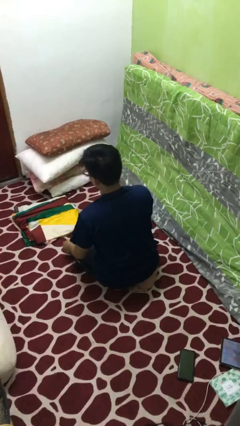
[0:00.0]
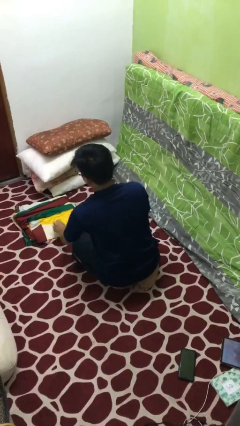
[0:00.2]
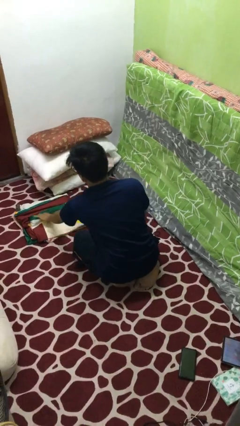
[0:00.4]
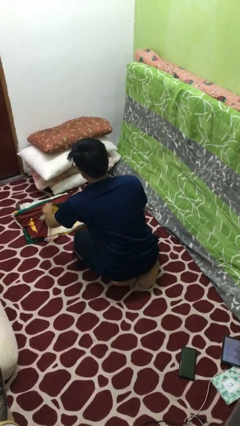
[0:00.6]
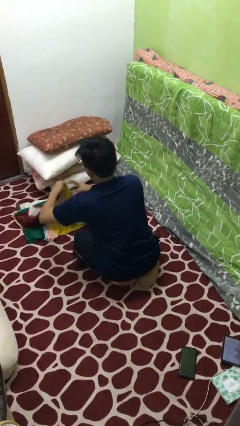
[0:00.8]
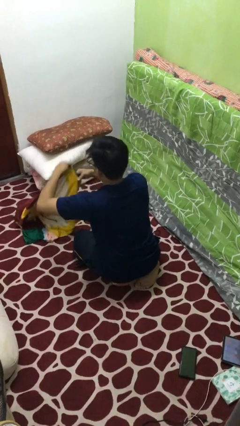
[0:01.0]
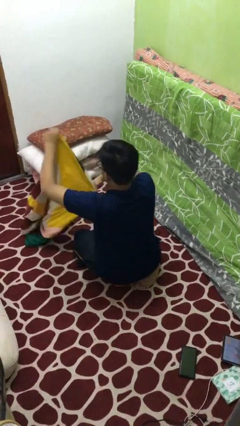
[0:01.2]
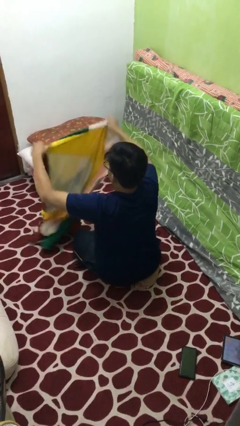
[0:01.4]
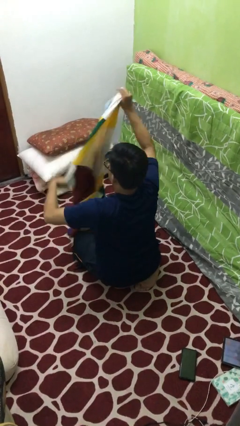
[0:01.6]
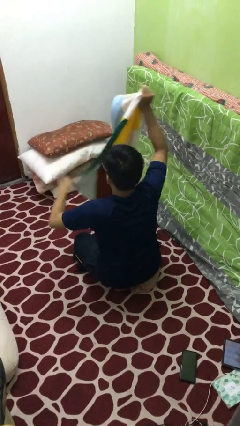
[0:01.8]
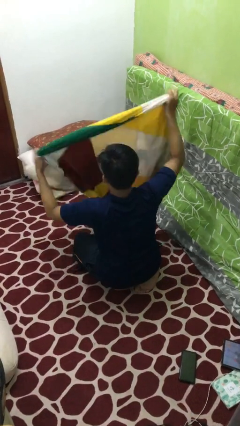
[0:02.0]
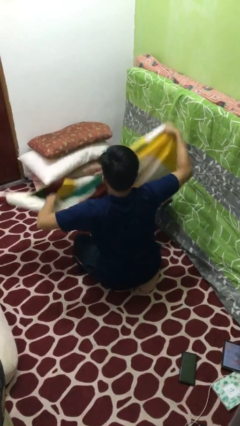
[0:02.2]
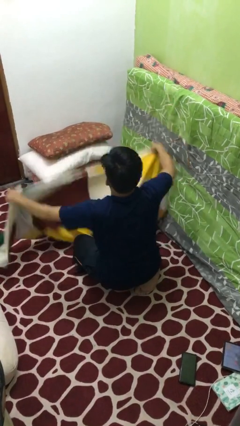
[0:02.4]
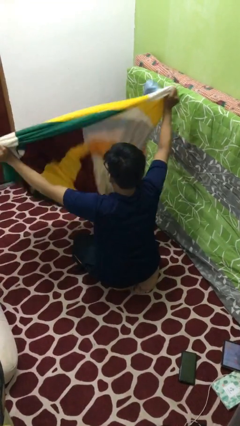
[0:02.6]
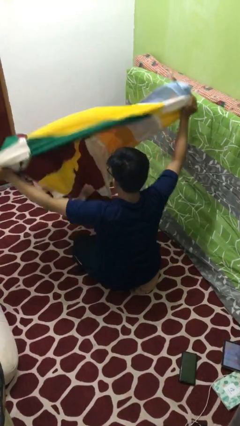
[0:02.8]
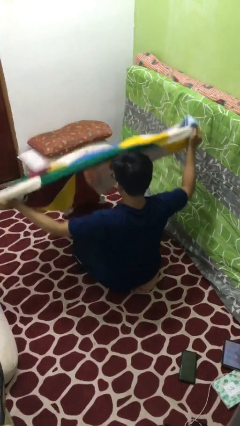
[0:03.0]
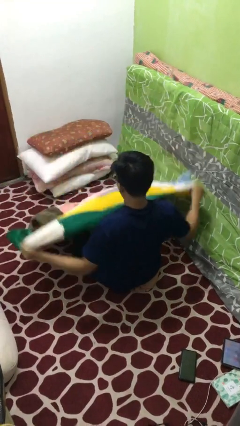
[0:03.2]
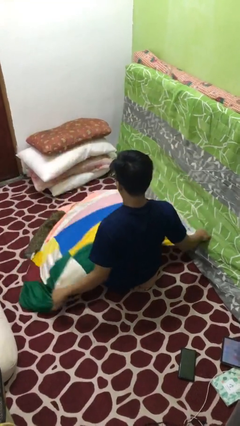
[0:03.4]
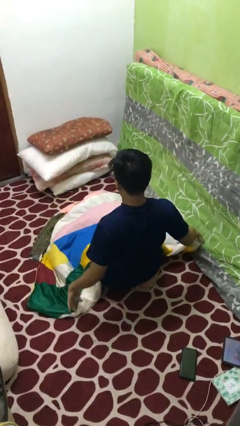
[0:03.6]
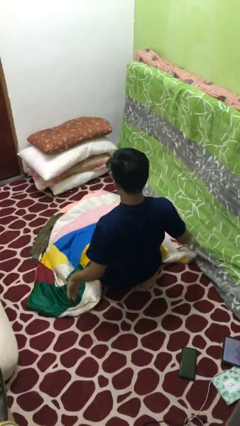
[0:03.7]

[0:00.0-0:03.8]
person unfolds blanket

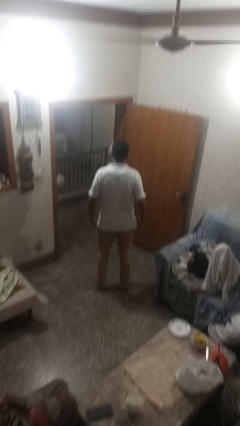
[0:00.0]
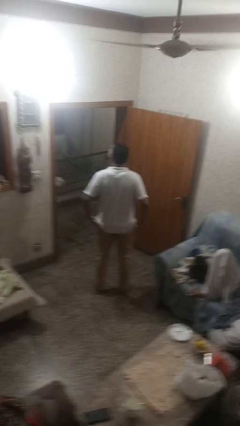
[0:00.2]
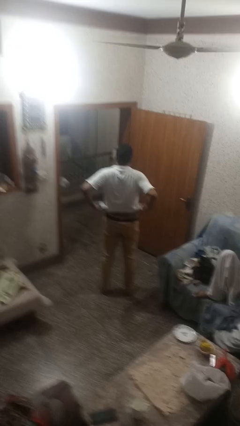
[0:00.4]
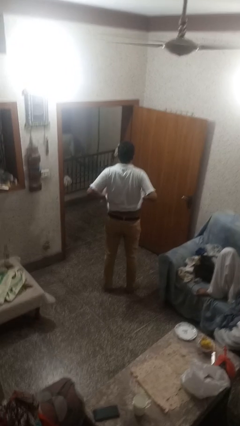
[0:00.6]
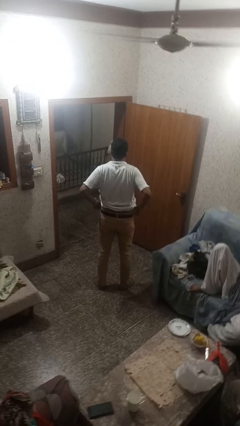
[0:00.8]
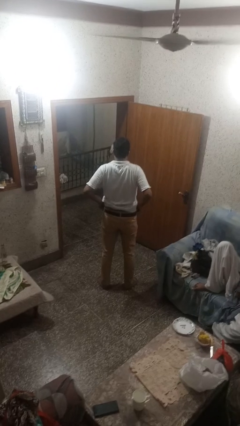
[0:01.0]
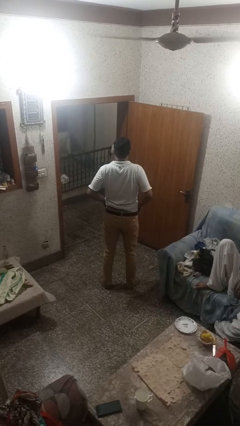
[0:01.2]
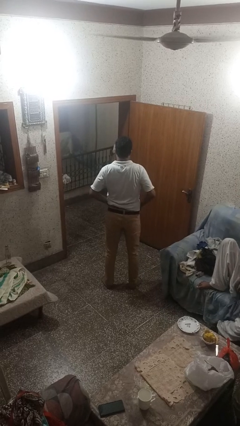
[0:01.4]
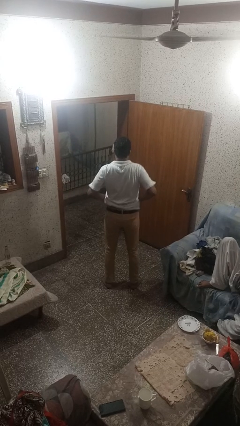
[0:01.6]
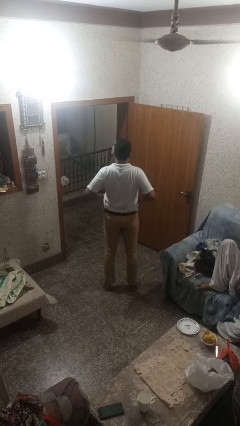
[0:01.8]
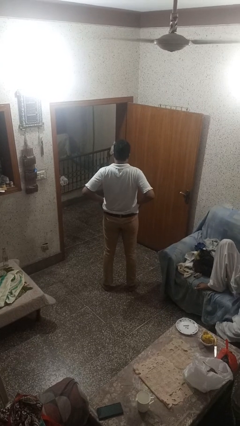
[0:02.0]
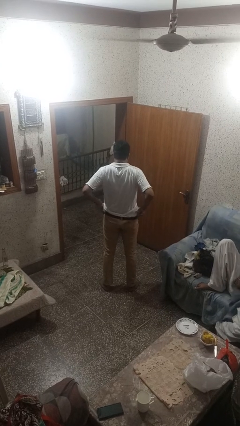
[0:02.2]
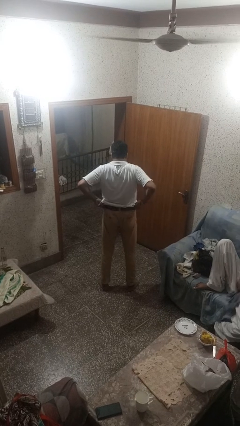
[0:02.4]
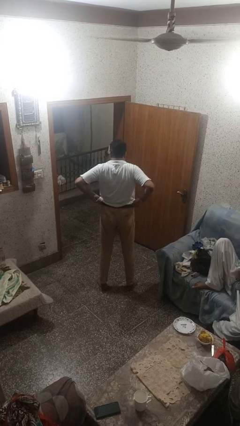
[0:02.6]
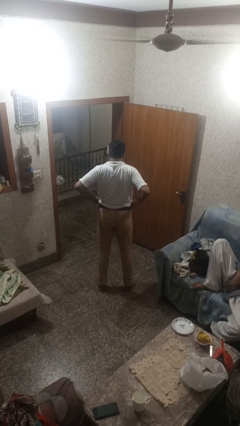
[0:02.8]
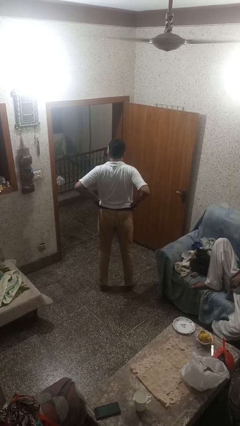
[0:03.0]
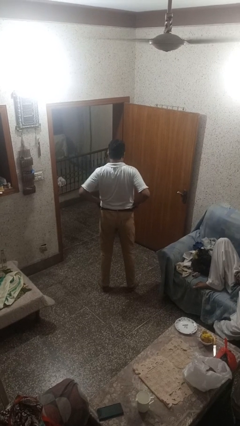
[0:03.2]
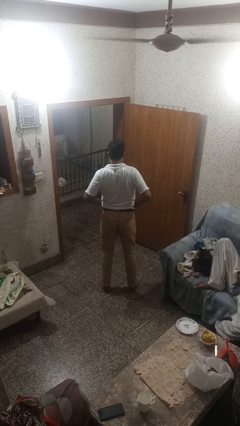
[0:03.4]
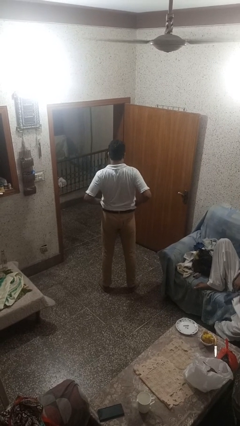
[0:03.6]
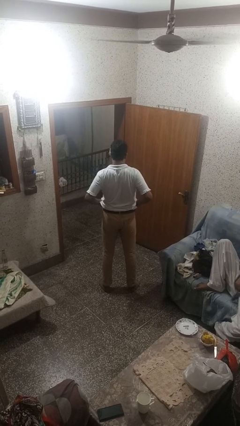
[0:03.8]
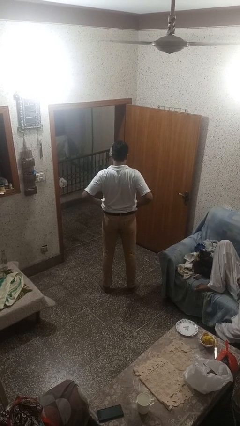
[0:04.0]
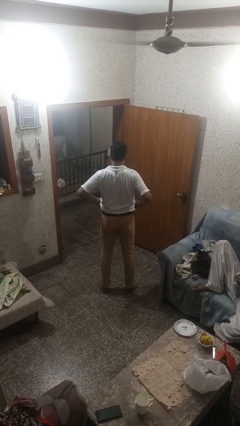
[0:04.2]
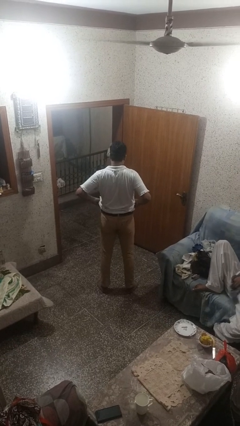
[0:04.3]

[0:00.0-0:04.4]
person hikes up pants

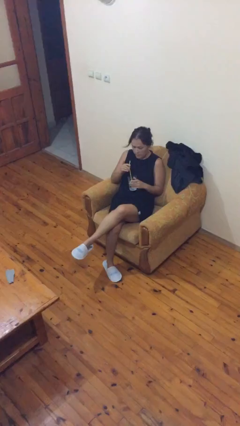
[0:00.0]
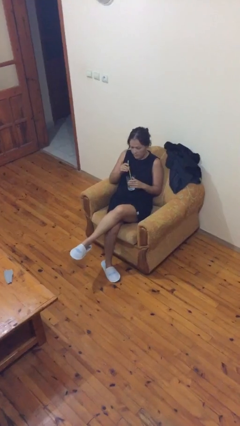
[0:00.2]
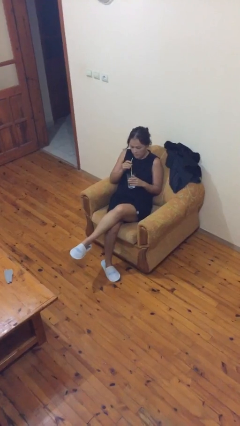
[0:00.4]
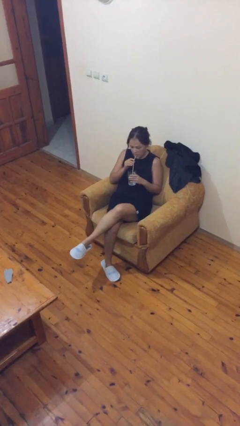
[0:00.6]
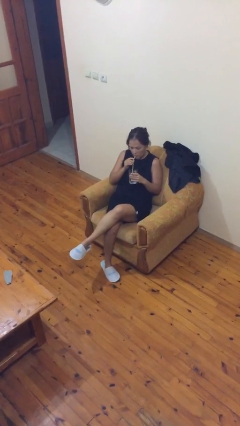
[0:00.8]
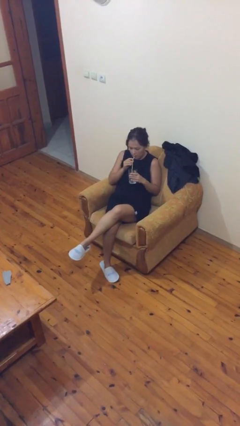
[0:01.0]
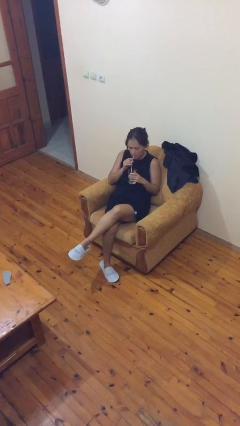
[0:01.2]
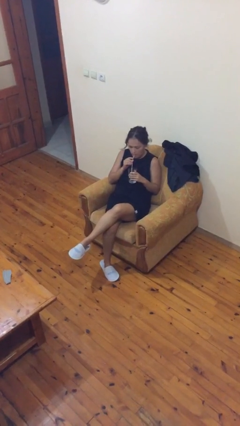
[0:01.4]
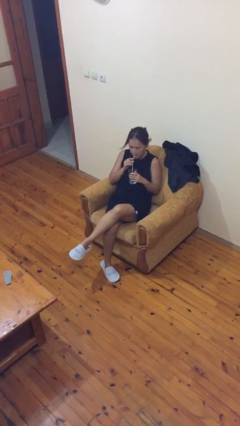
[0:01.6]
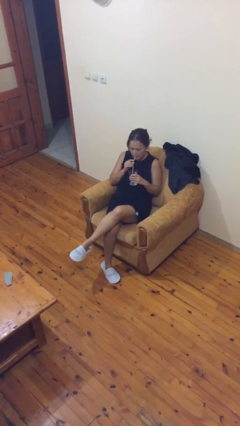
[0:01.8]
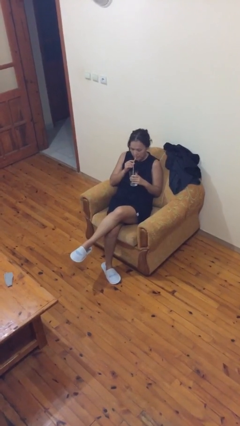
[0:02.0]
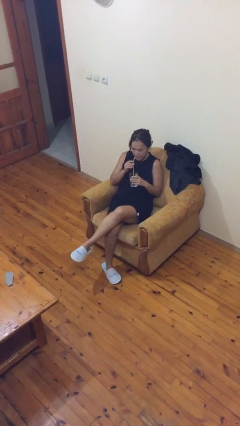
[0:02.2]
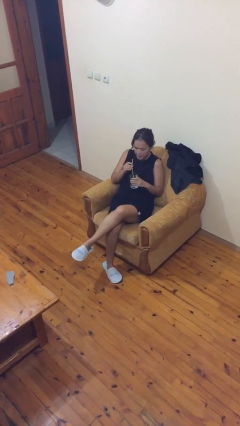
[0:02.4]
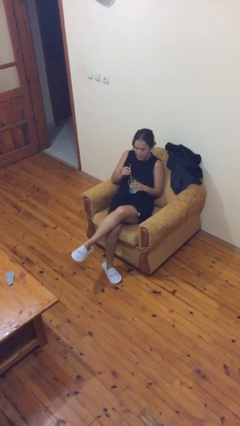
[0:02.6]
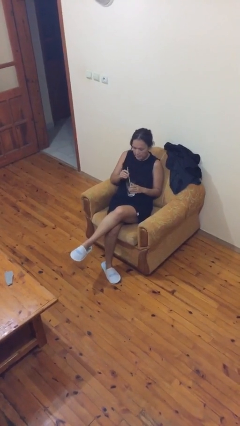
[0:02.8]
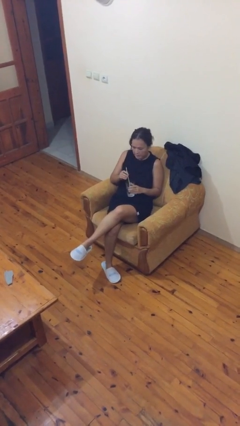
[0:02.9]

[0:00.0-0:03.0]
person drinks from straw

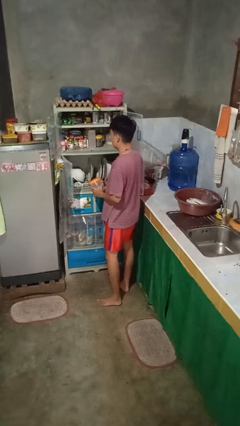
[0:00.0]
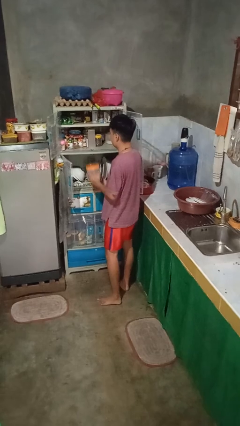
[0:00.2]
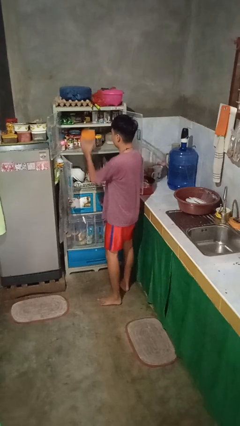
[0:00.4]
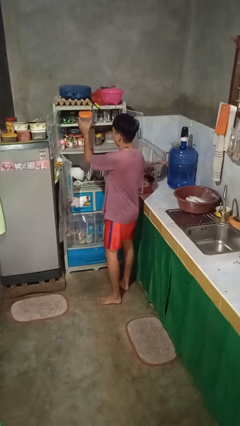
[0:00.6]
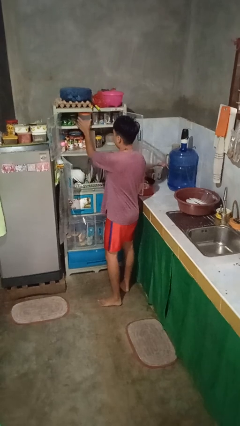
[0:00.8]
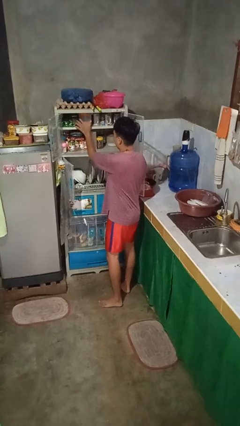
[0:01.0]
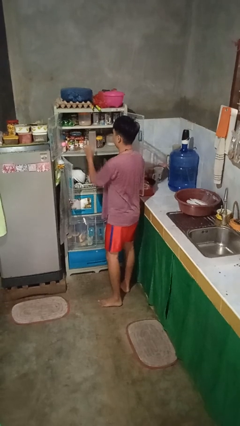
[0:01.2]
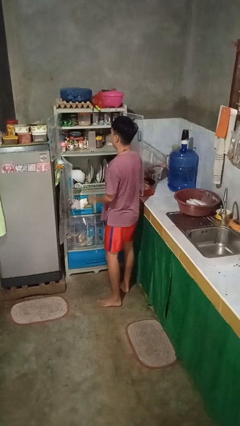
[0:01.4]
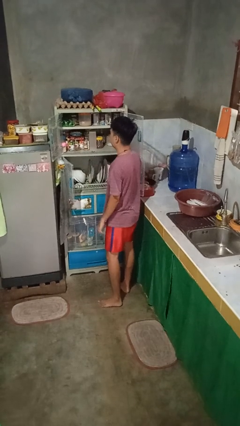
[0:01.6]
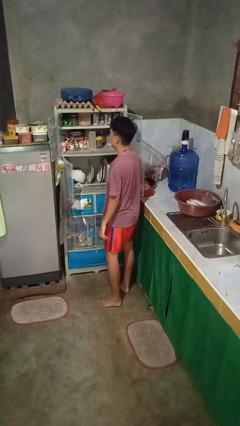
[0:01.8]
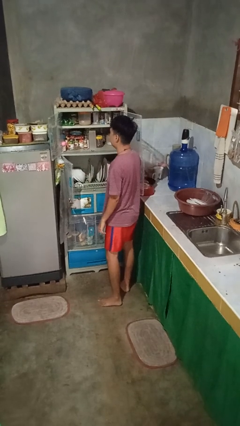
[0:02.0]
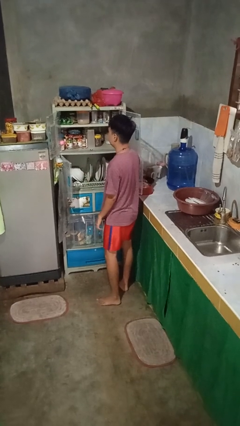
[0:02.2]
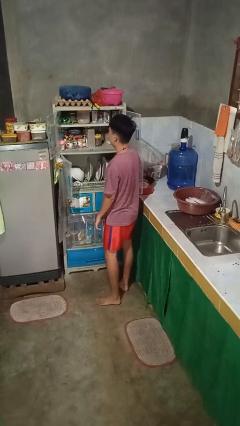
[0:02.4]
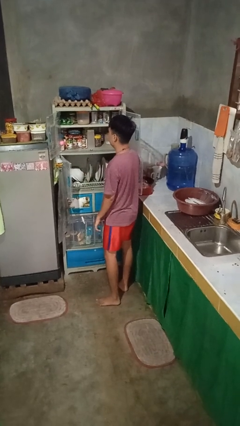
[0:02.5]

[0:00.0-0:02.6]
person puts object in cabinet

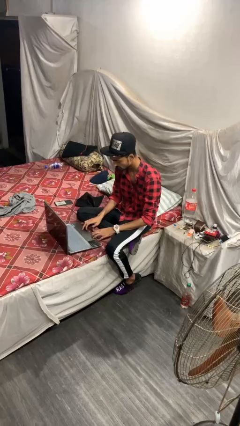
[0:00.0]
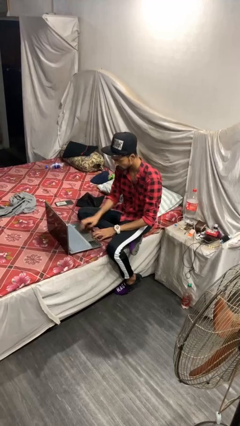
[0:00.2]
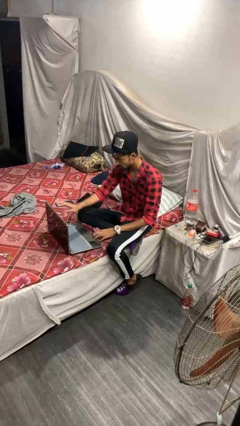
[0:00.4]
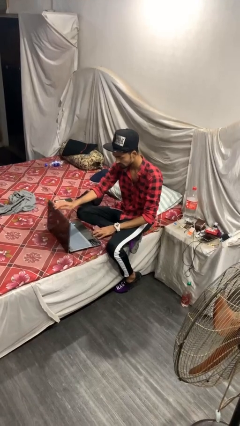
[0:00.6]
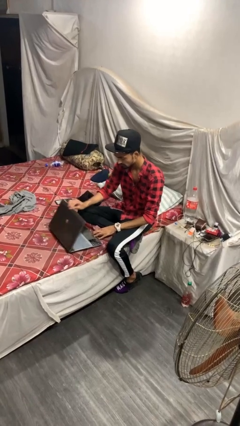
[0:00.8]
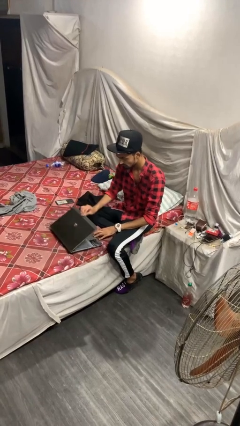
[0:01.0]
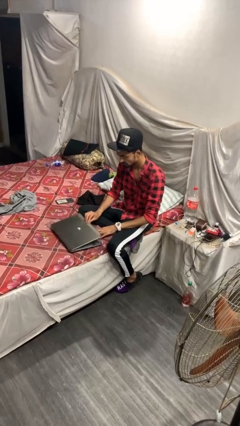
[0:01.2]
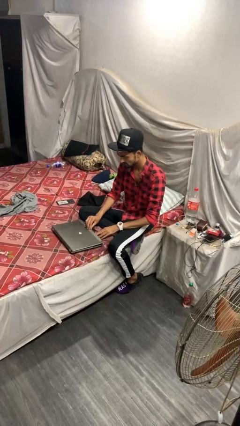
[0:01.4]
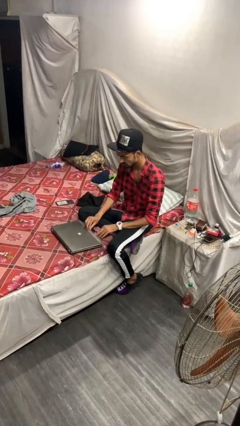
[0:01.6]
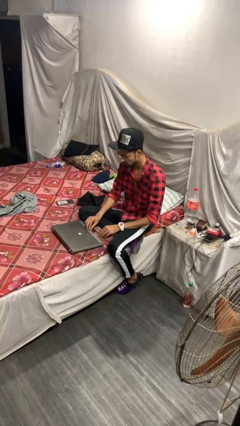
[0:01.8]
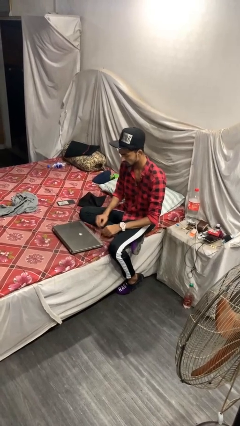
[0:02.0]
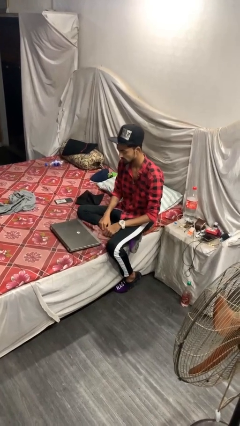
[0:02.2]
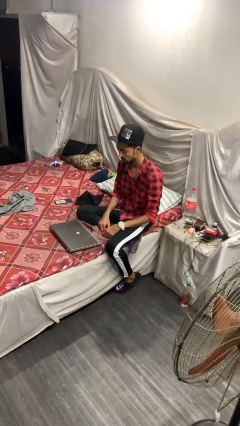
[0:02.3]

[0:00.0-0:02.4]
person closes laptop

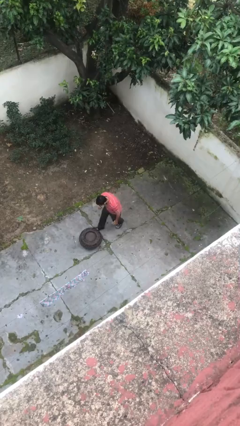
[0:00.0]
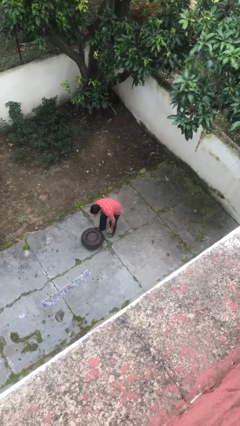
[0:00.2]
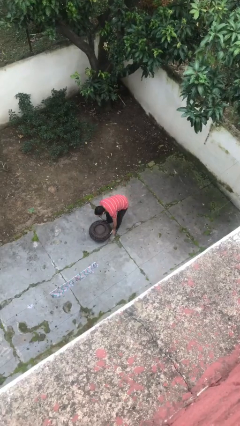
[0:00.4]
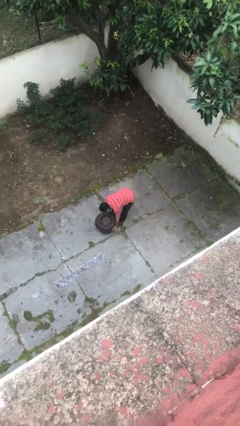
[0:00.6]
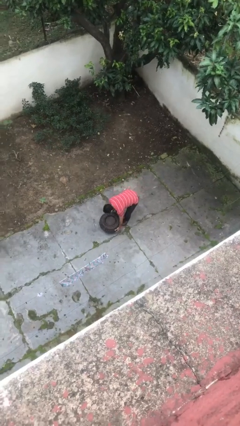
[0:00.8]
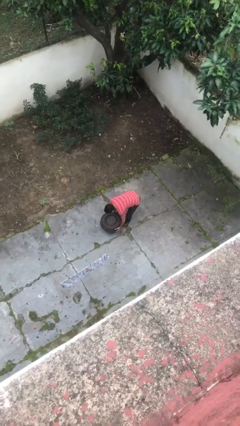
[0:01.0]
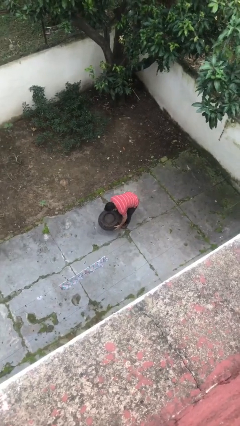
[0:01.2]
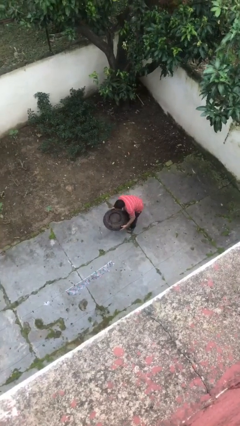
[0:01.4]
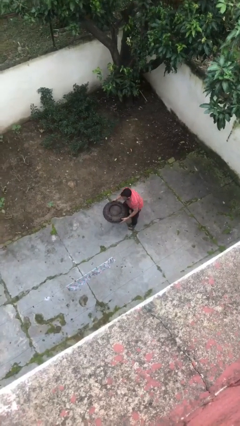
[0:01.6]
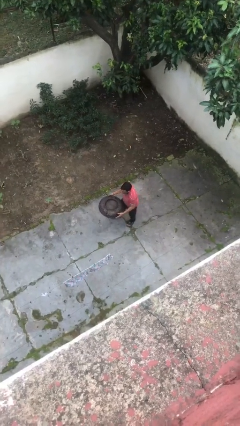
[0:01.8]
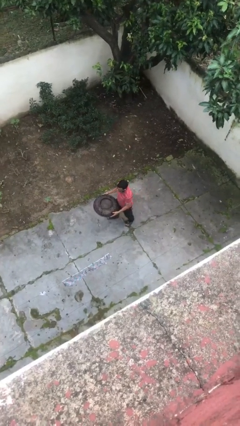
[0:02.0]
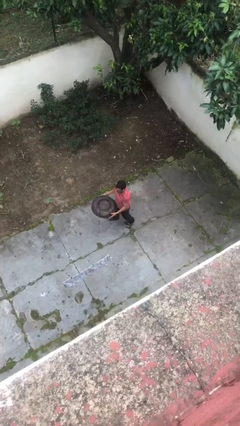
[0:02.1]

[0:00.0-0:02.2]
person picks up object from floor
